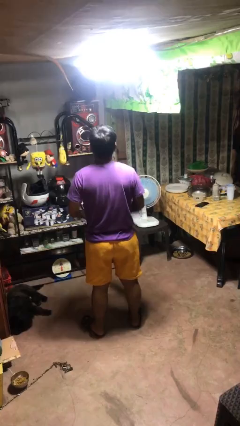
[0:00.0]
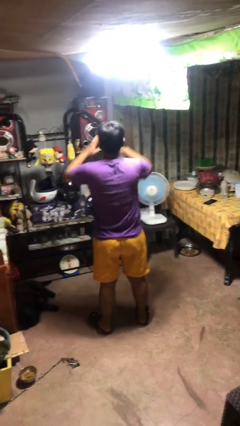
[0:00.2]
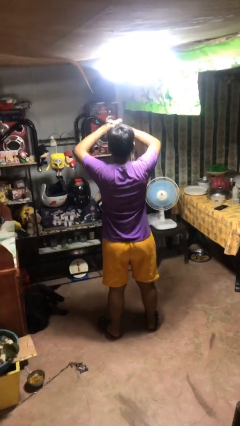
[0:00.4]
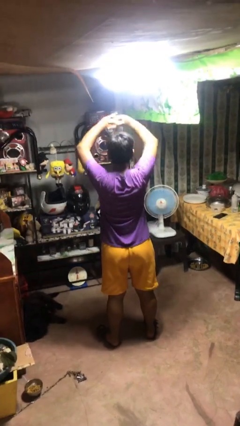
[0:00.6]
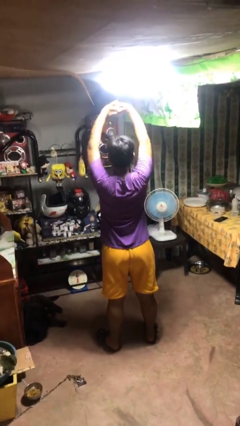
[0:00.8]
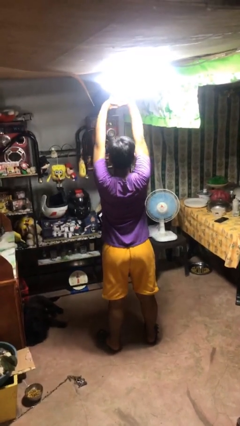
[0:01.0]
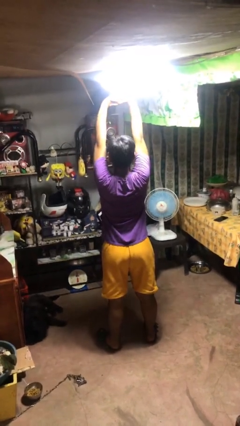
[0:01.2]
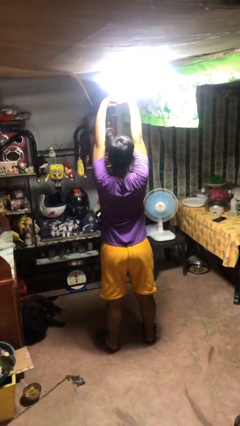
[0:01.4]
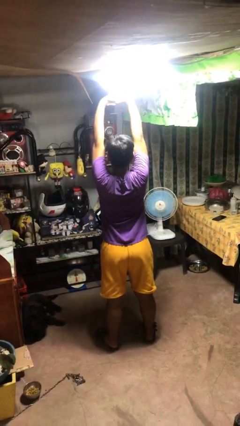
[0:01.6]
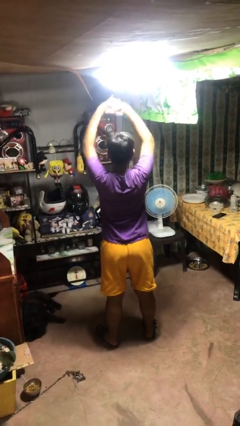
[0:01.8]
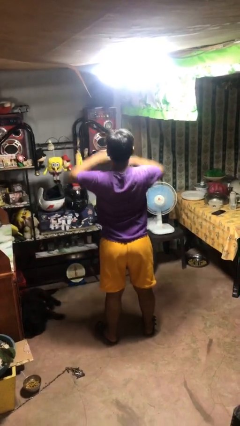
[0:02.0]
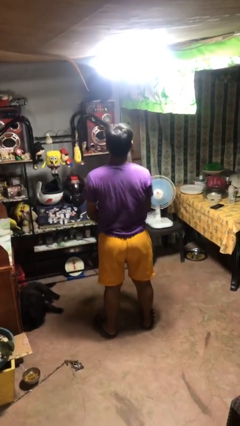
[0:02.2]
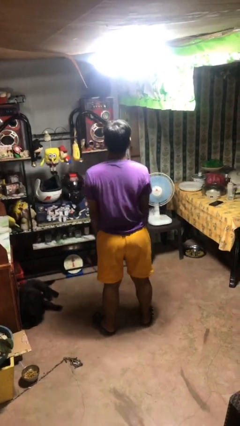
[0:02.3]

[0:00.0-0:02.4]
person stretches arms over head

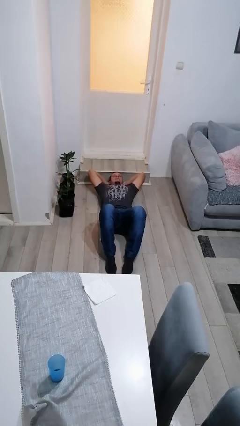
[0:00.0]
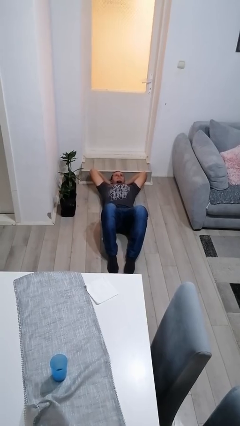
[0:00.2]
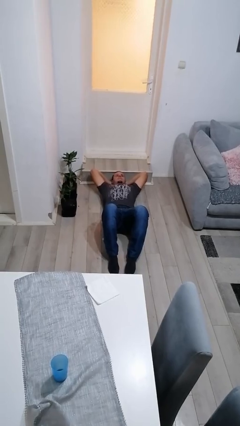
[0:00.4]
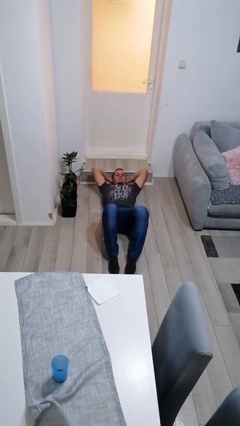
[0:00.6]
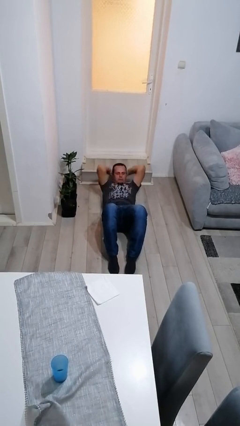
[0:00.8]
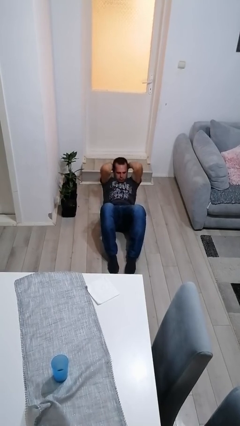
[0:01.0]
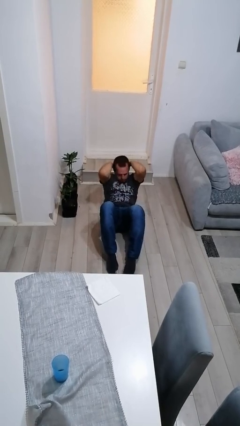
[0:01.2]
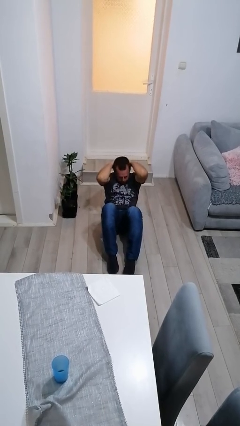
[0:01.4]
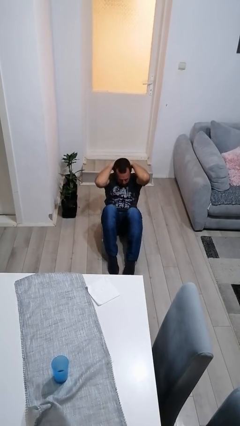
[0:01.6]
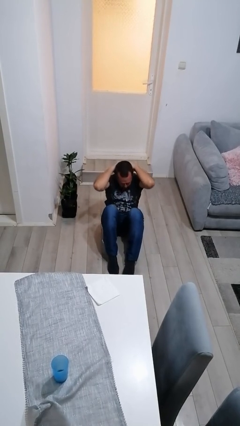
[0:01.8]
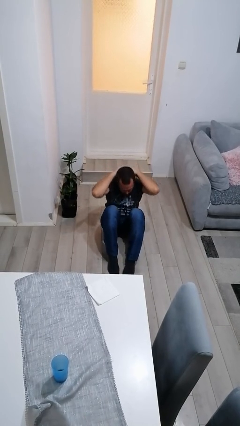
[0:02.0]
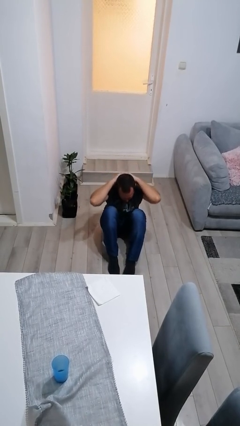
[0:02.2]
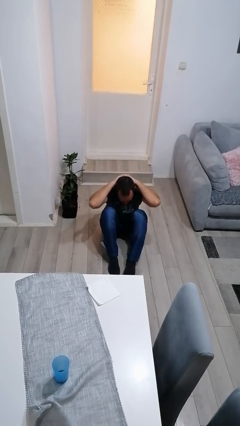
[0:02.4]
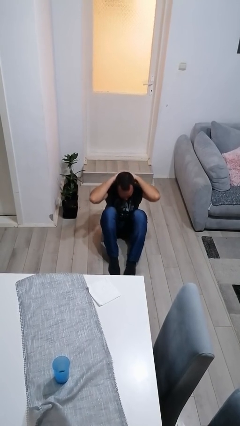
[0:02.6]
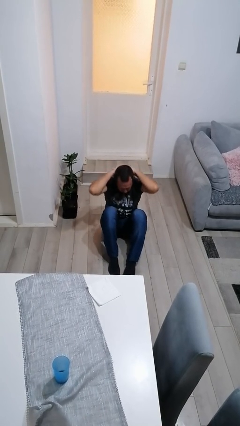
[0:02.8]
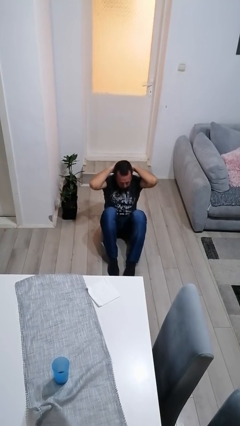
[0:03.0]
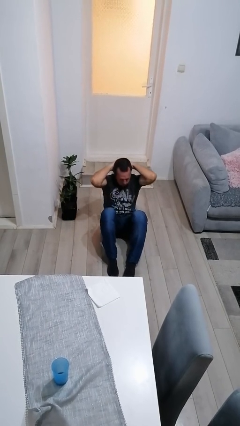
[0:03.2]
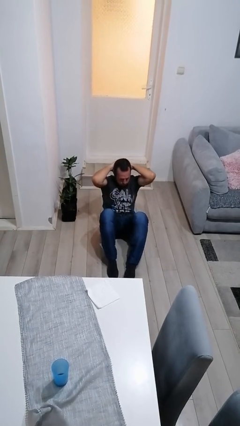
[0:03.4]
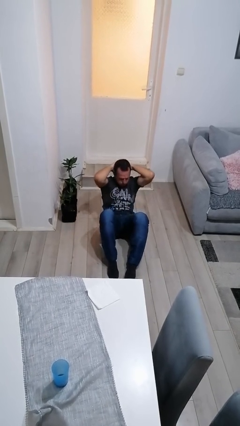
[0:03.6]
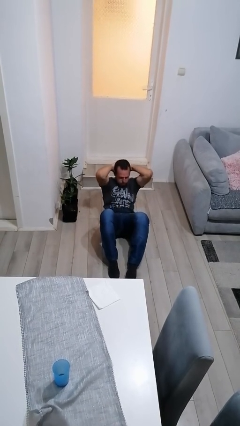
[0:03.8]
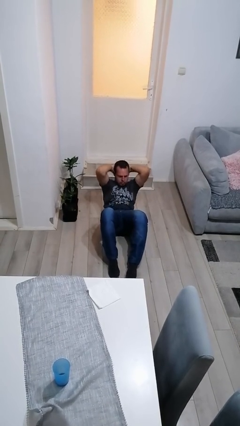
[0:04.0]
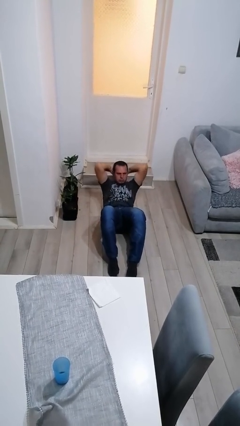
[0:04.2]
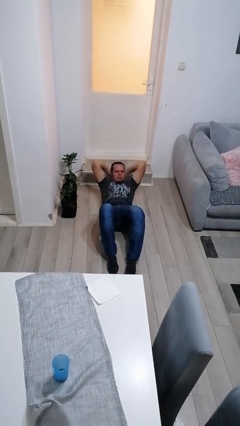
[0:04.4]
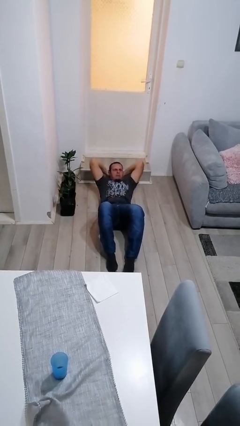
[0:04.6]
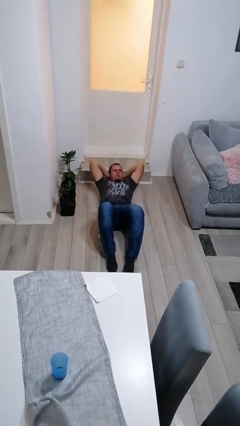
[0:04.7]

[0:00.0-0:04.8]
person exercises with situp

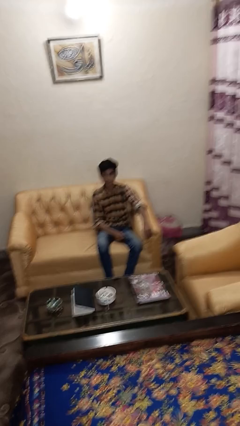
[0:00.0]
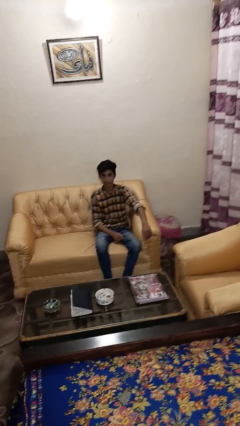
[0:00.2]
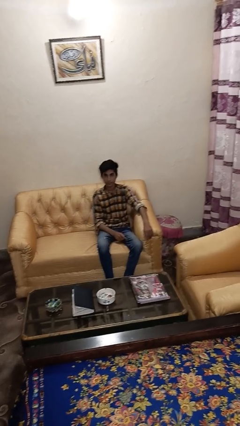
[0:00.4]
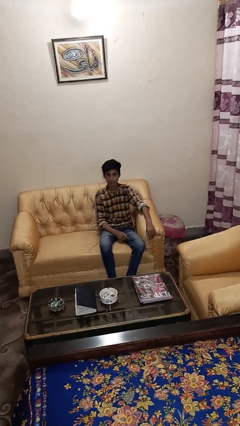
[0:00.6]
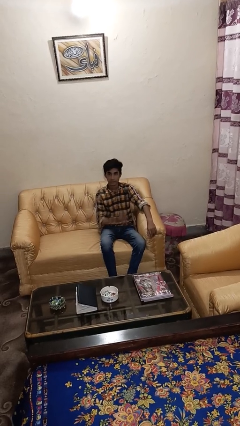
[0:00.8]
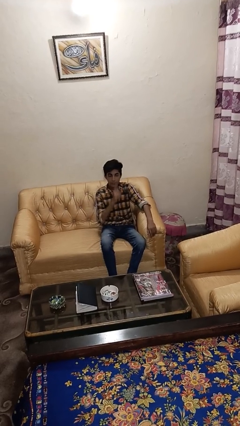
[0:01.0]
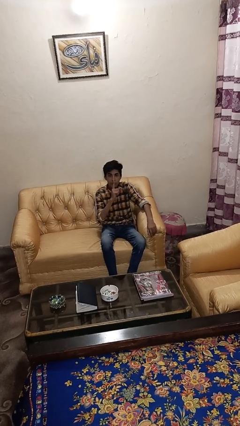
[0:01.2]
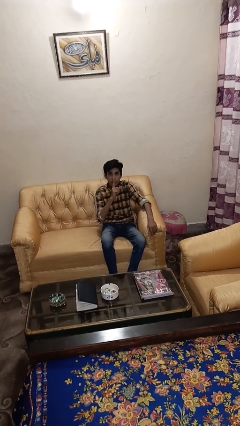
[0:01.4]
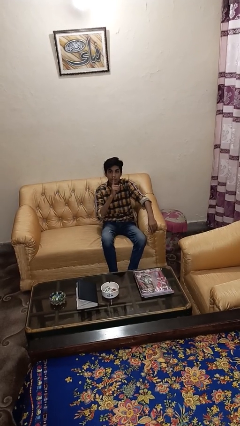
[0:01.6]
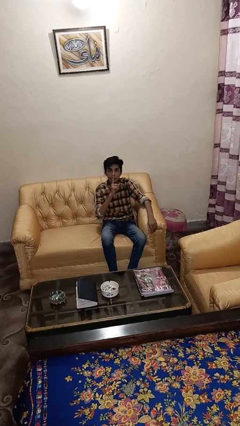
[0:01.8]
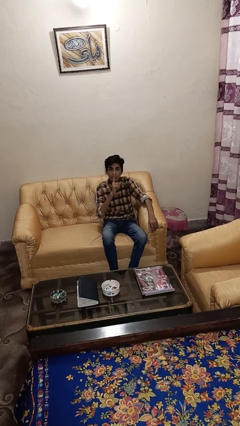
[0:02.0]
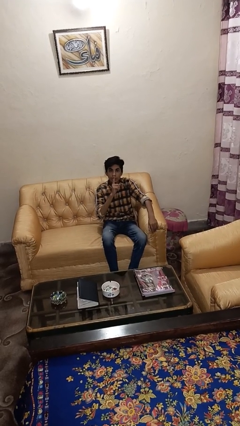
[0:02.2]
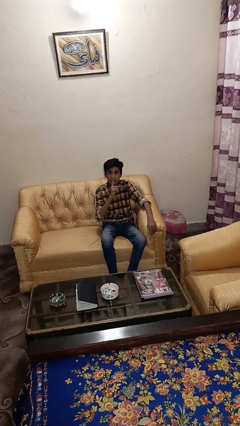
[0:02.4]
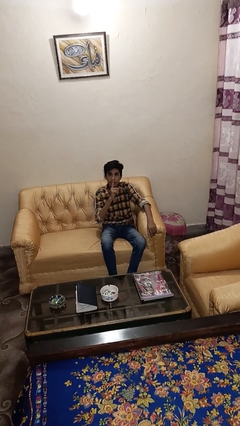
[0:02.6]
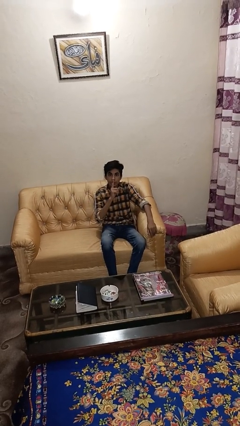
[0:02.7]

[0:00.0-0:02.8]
person gestures be quiet

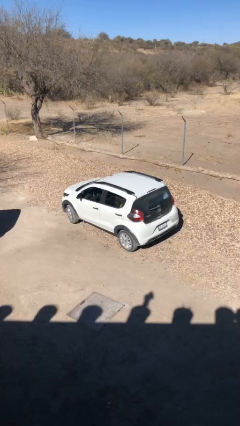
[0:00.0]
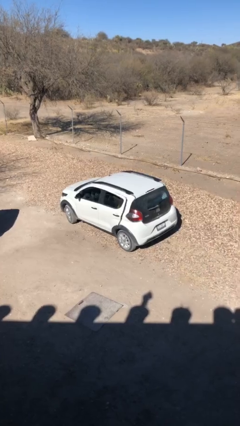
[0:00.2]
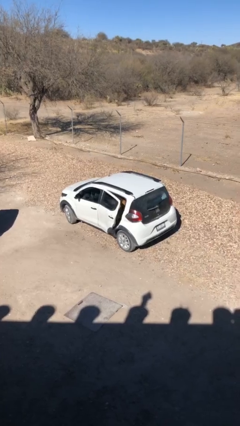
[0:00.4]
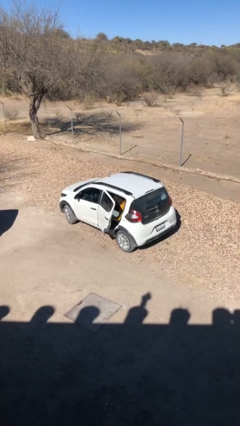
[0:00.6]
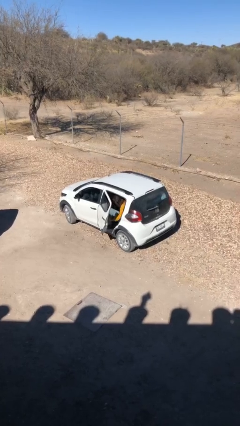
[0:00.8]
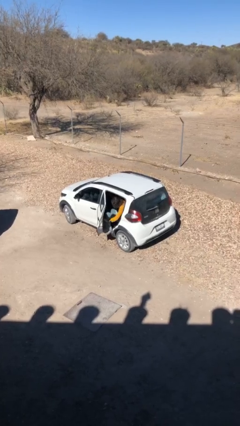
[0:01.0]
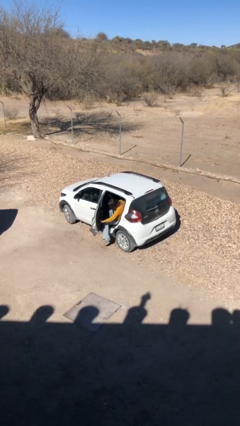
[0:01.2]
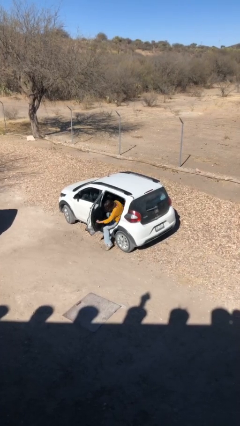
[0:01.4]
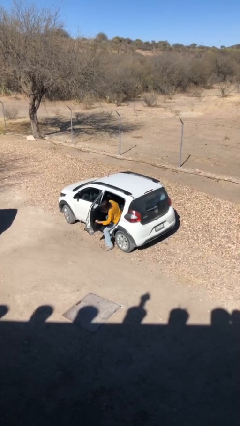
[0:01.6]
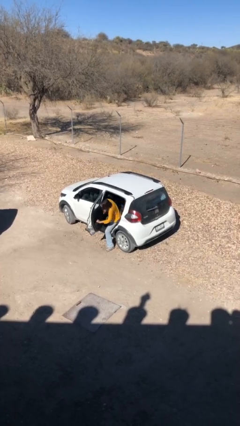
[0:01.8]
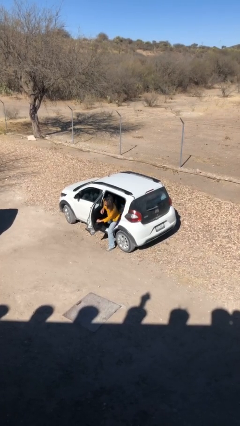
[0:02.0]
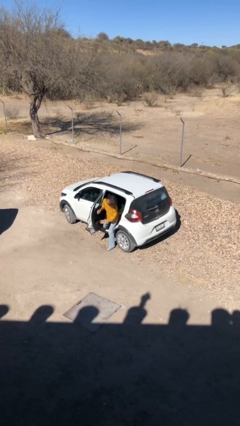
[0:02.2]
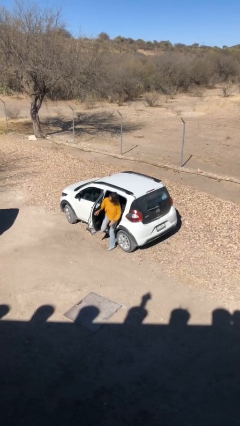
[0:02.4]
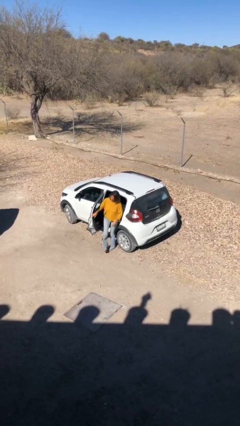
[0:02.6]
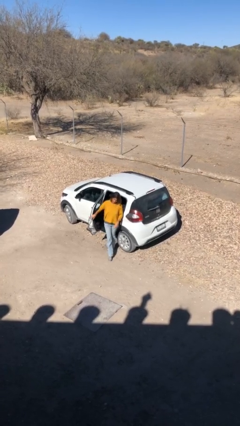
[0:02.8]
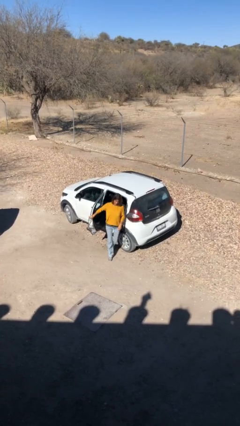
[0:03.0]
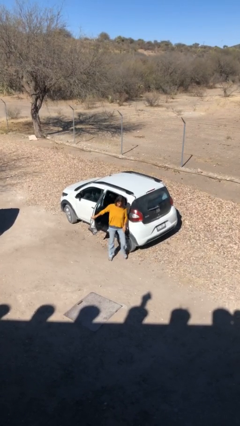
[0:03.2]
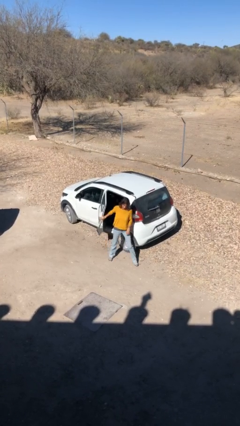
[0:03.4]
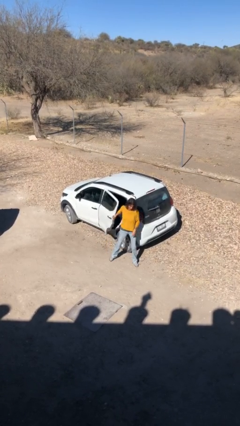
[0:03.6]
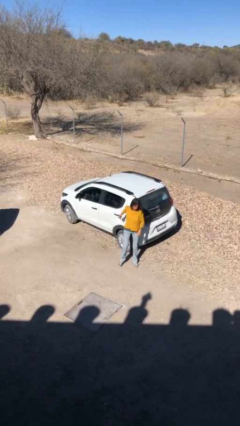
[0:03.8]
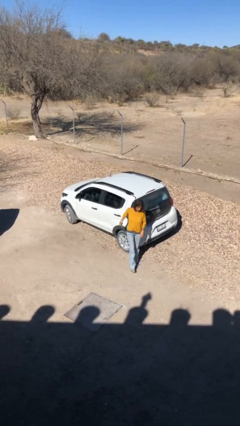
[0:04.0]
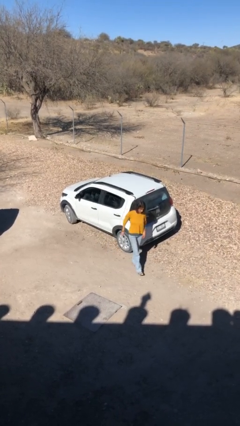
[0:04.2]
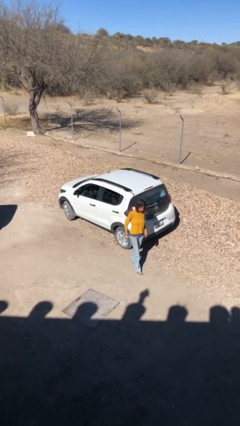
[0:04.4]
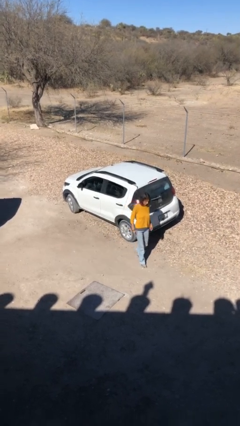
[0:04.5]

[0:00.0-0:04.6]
car drops off person

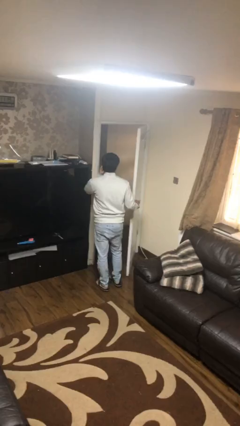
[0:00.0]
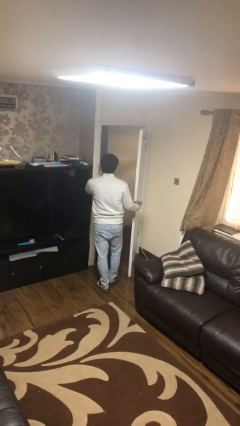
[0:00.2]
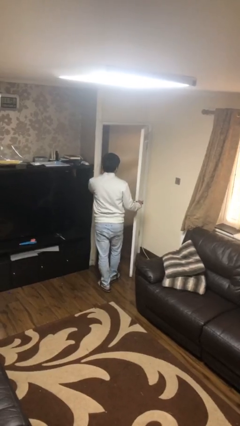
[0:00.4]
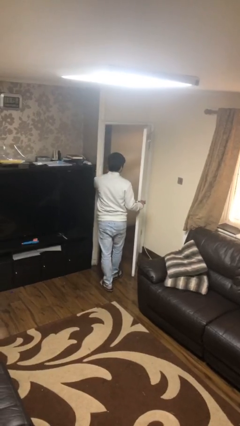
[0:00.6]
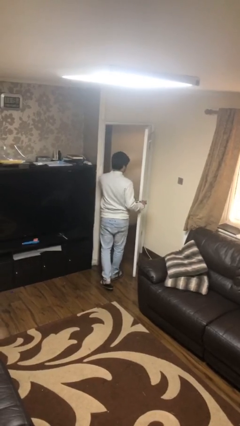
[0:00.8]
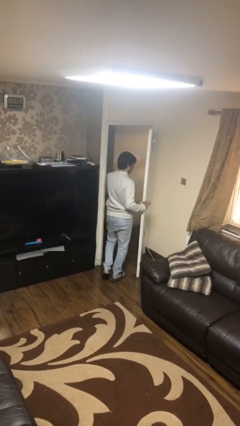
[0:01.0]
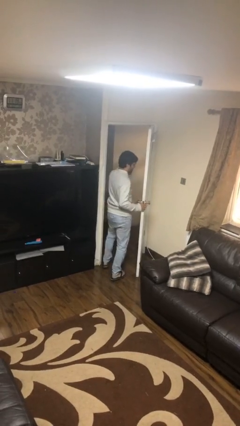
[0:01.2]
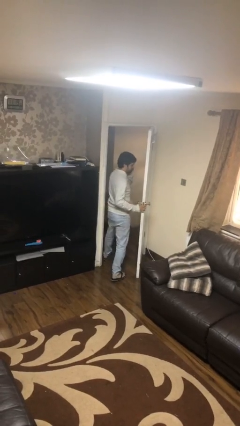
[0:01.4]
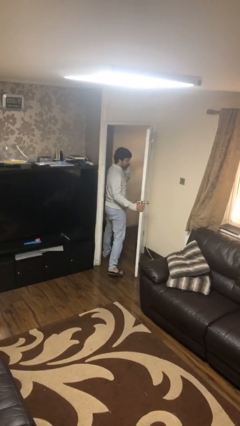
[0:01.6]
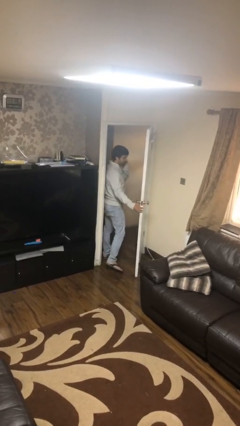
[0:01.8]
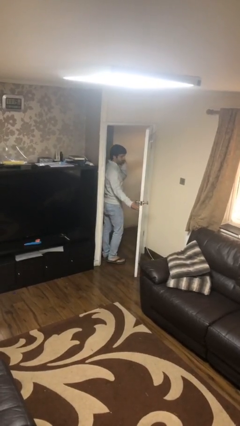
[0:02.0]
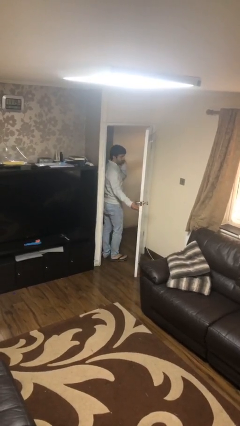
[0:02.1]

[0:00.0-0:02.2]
person exits scene through structure

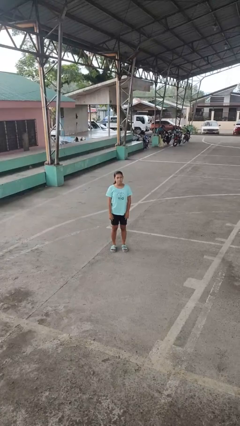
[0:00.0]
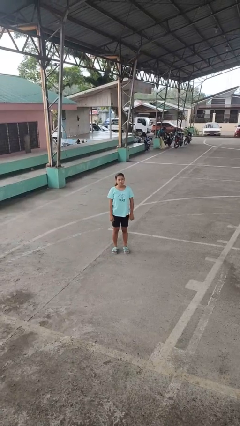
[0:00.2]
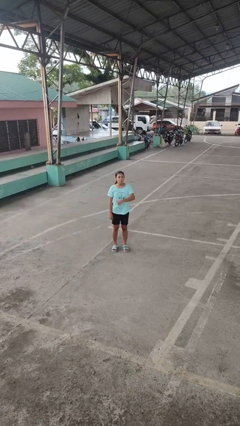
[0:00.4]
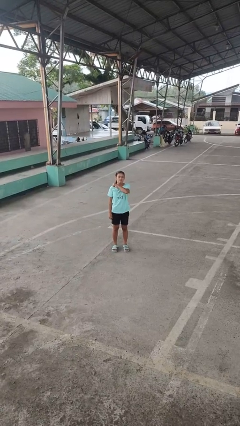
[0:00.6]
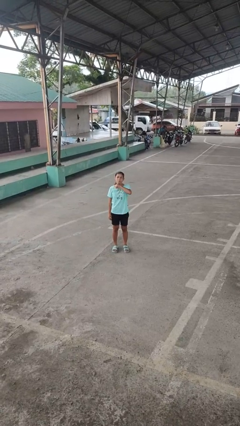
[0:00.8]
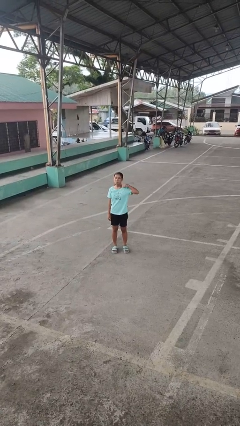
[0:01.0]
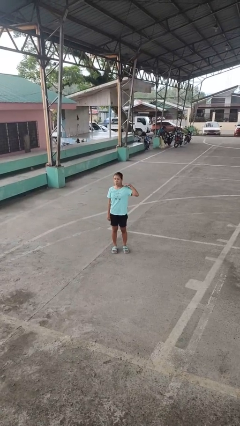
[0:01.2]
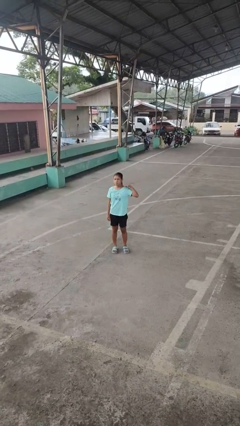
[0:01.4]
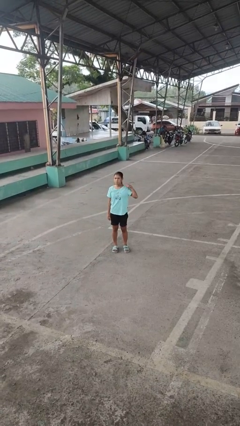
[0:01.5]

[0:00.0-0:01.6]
person gestures cut
